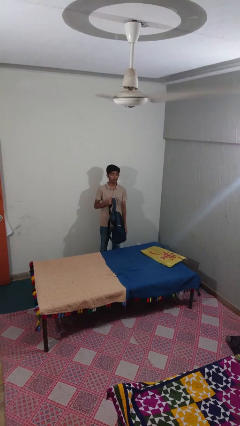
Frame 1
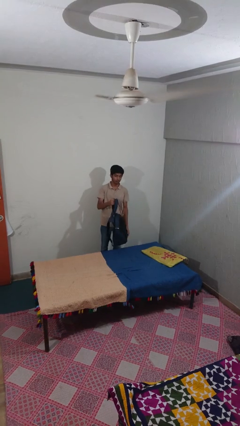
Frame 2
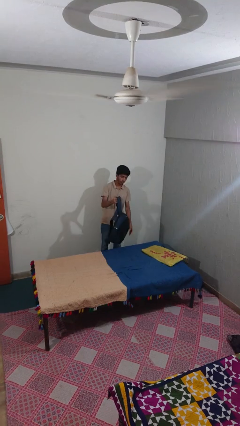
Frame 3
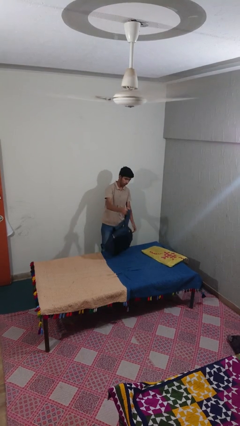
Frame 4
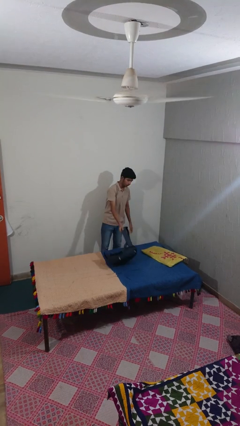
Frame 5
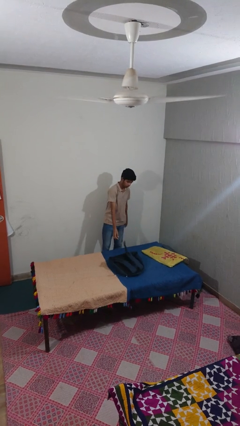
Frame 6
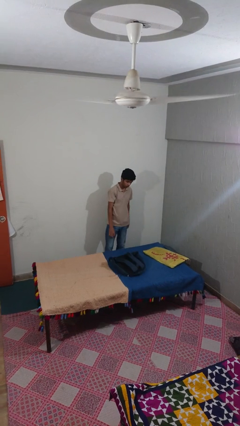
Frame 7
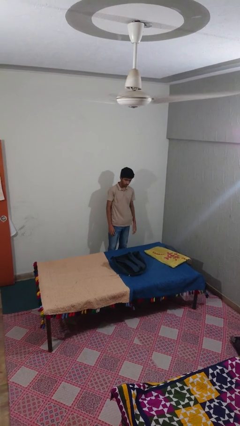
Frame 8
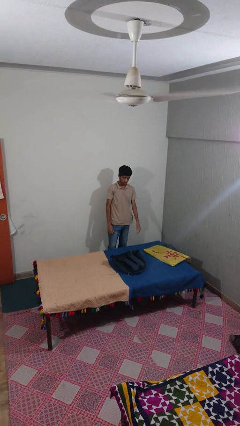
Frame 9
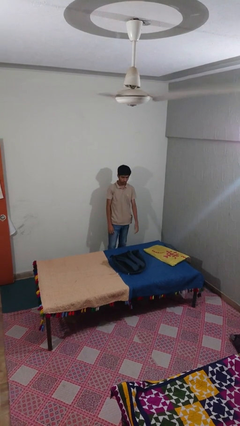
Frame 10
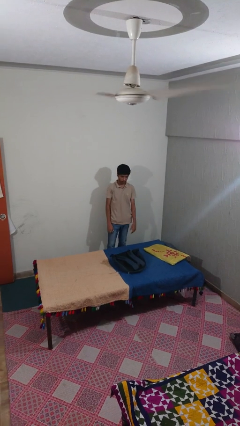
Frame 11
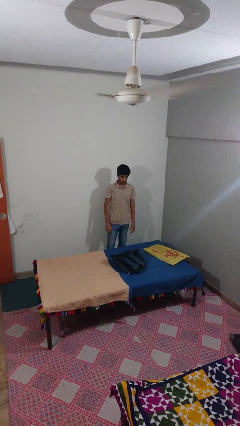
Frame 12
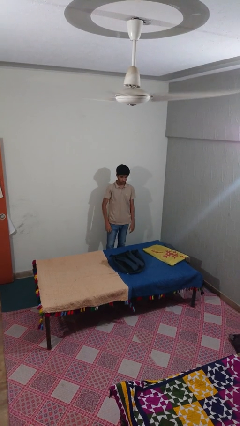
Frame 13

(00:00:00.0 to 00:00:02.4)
person puts down object on bed

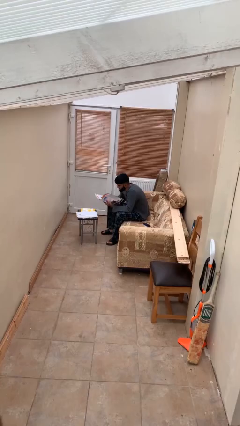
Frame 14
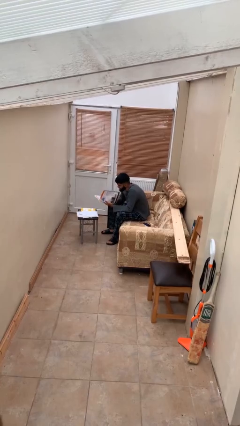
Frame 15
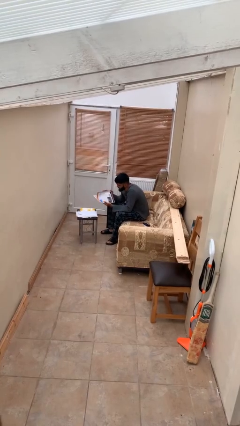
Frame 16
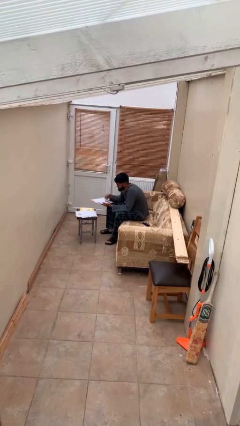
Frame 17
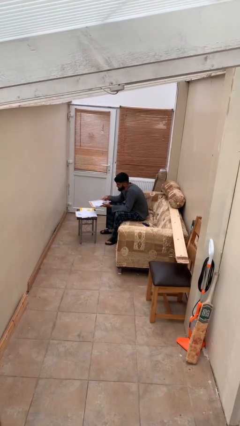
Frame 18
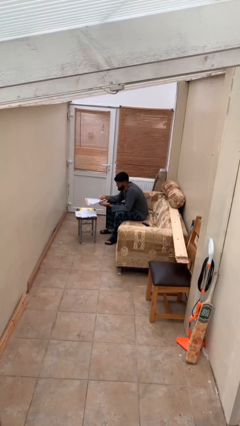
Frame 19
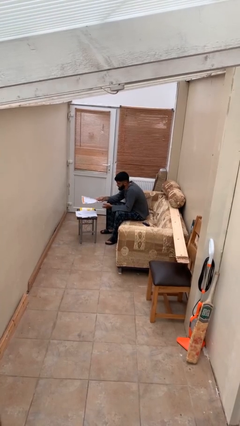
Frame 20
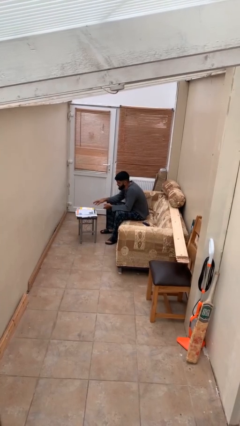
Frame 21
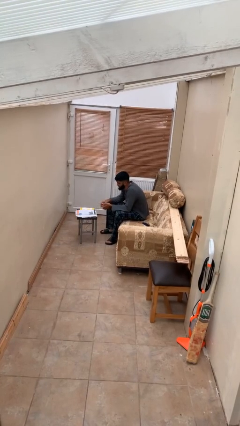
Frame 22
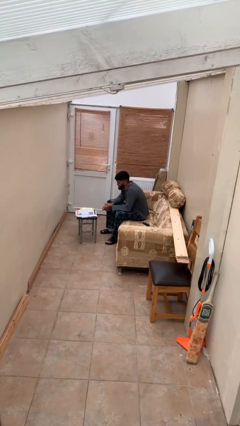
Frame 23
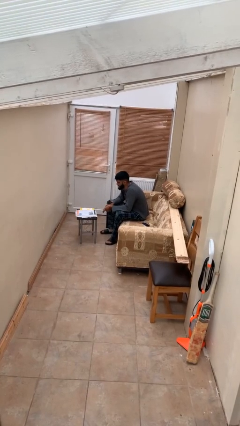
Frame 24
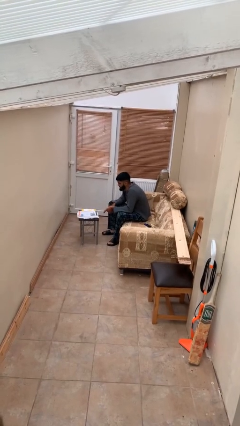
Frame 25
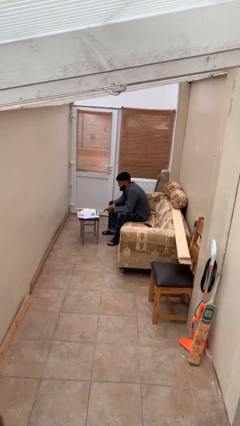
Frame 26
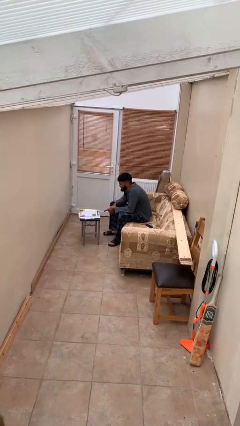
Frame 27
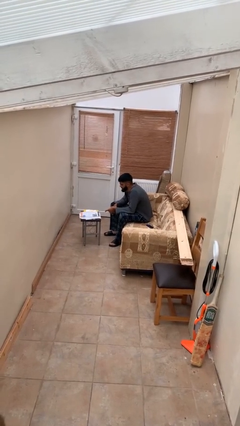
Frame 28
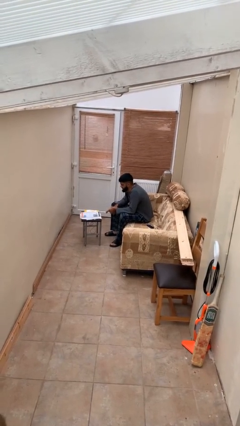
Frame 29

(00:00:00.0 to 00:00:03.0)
person puts down object on table

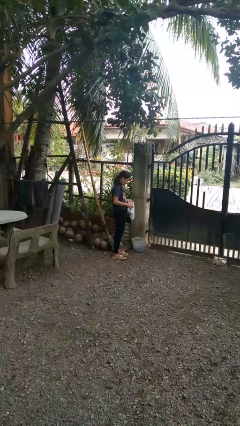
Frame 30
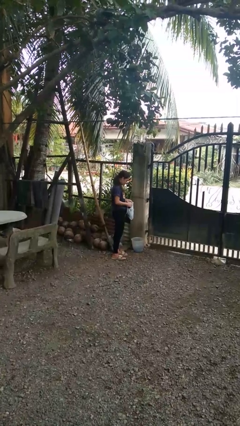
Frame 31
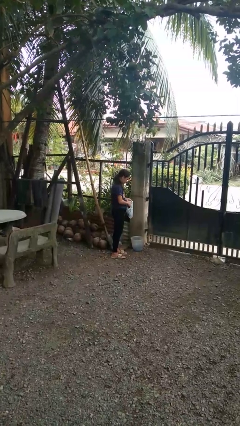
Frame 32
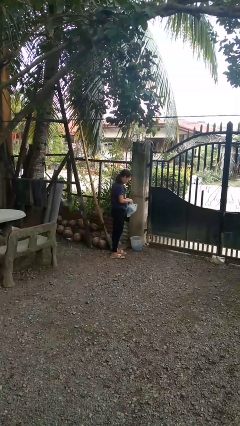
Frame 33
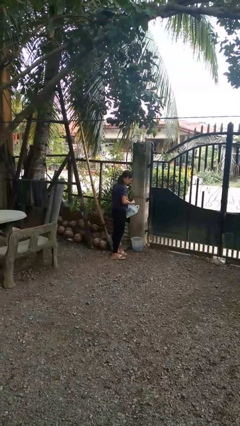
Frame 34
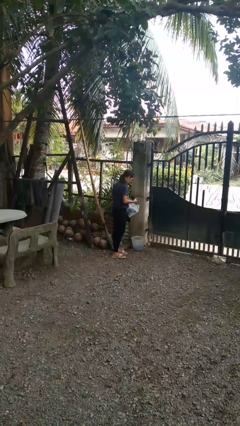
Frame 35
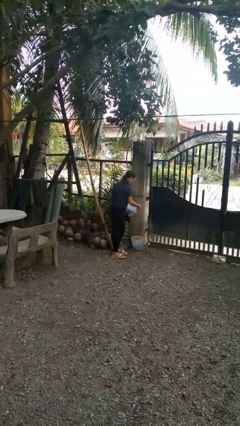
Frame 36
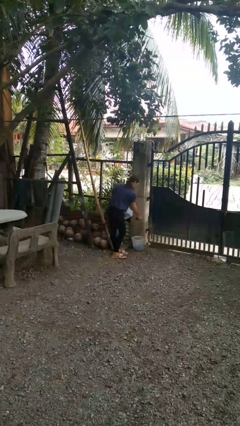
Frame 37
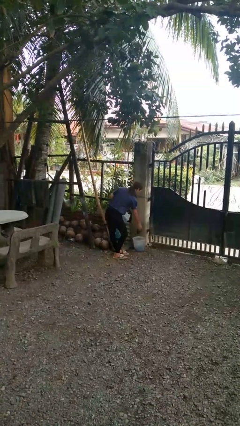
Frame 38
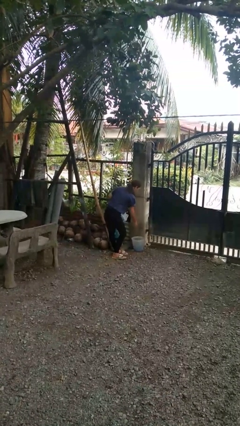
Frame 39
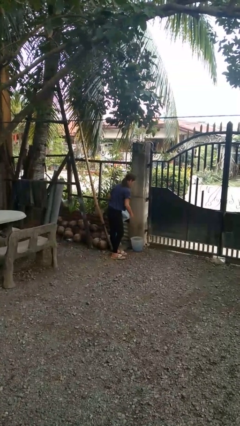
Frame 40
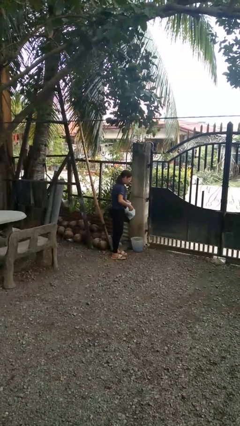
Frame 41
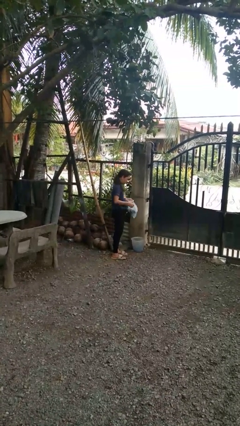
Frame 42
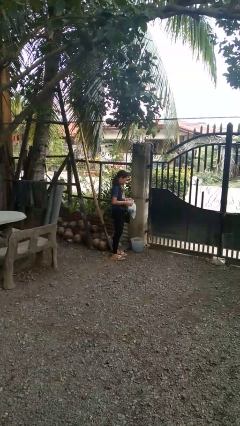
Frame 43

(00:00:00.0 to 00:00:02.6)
person discards trash

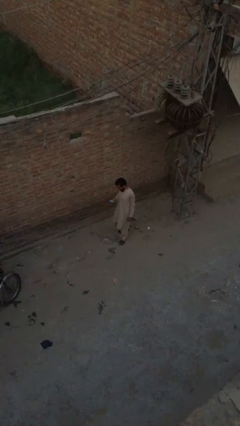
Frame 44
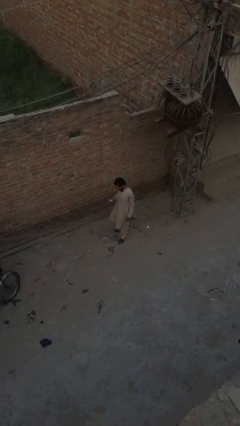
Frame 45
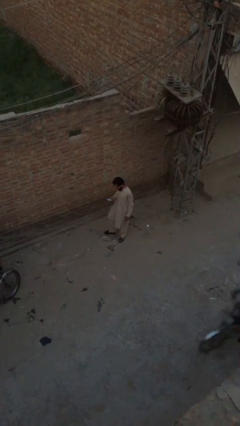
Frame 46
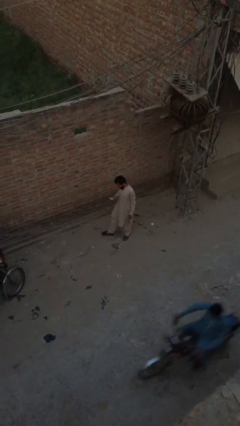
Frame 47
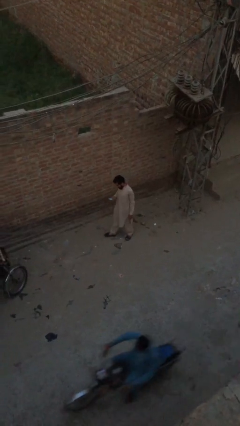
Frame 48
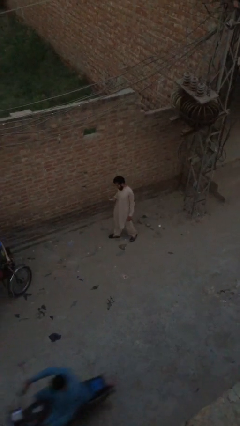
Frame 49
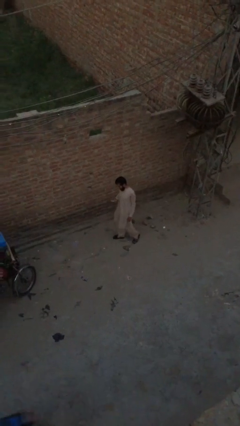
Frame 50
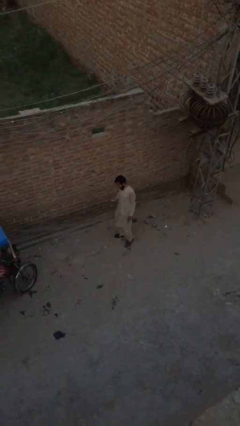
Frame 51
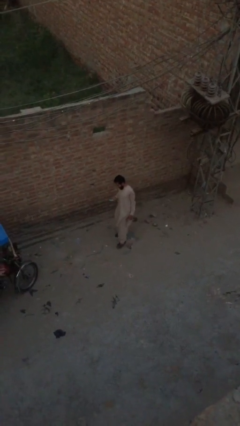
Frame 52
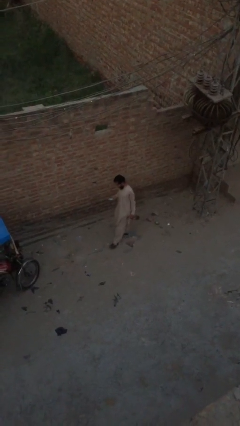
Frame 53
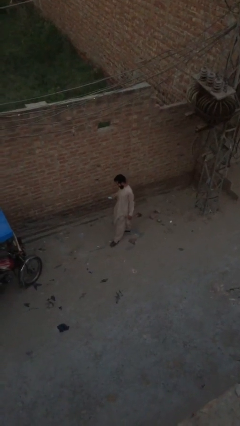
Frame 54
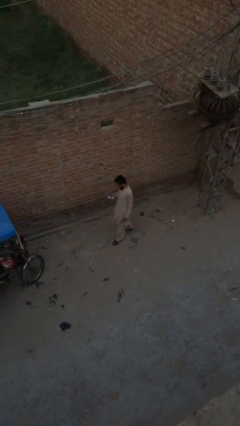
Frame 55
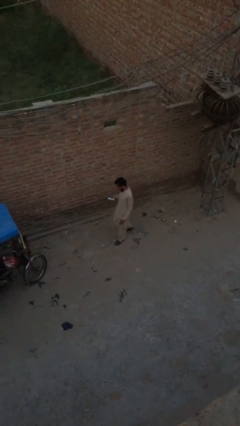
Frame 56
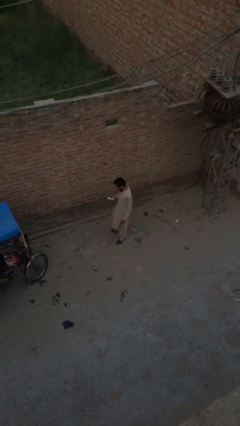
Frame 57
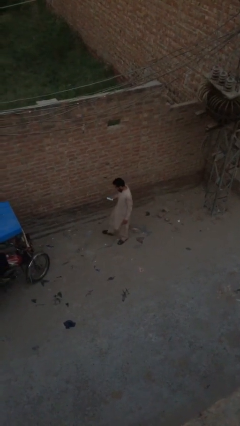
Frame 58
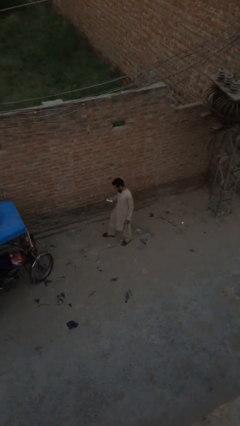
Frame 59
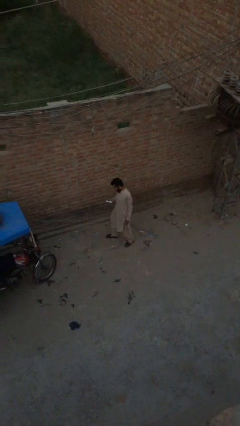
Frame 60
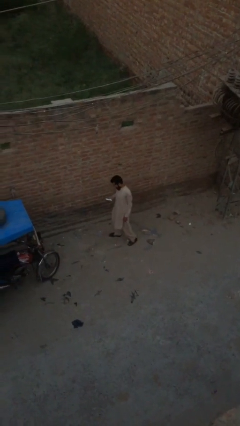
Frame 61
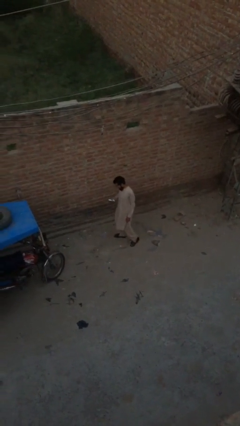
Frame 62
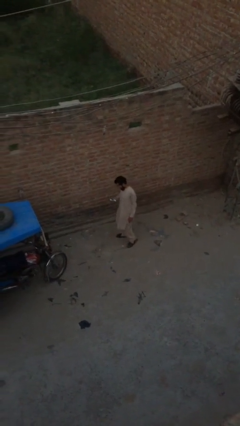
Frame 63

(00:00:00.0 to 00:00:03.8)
person texts on phone

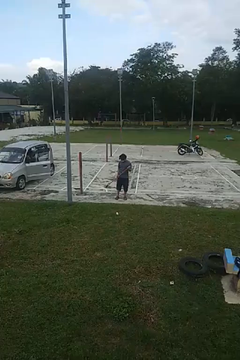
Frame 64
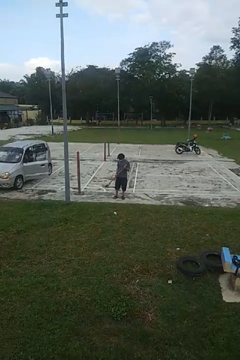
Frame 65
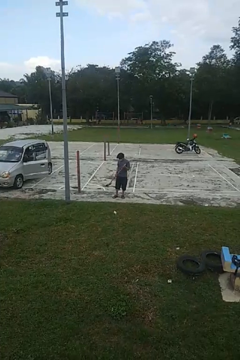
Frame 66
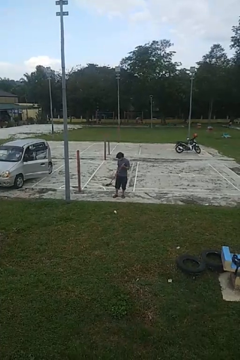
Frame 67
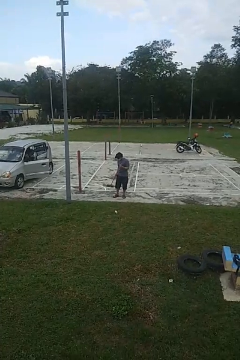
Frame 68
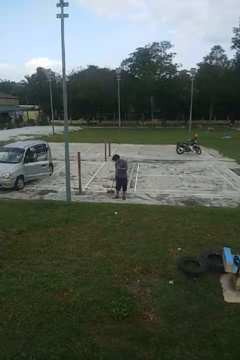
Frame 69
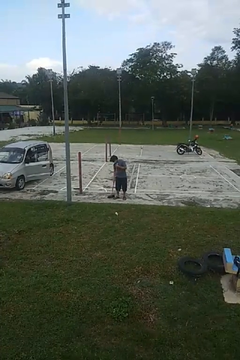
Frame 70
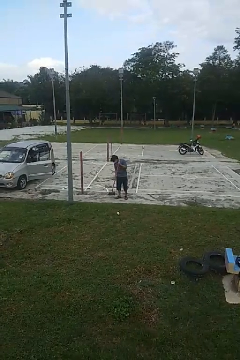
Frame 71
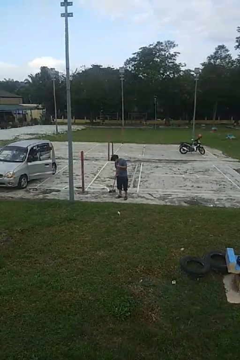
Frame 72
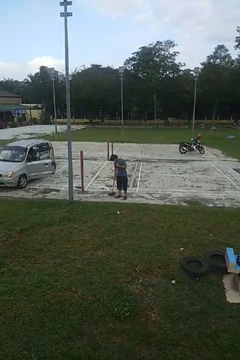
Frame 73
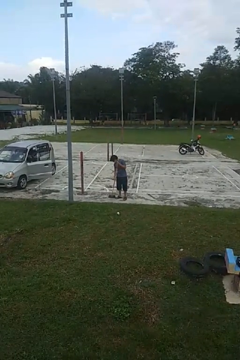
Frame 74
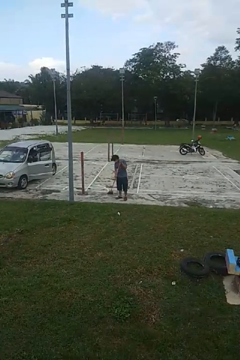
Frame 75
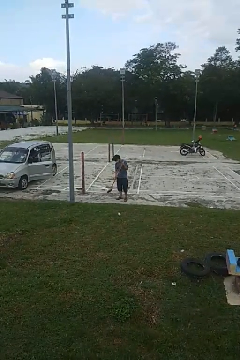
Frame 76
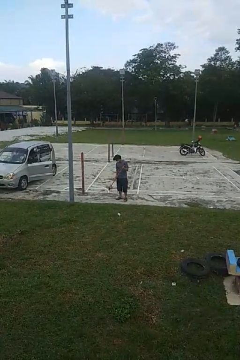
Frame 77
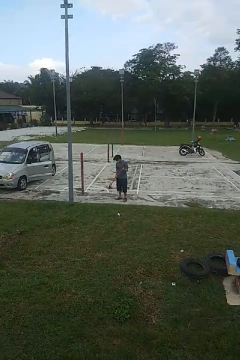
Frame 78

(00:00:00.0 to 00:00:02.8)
person sweeps floor

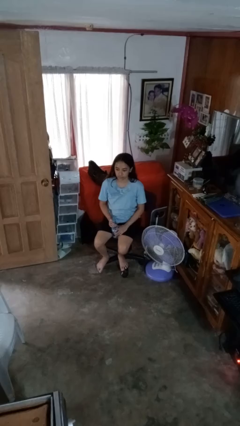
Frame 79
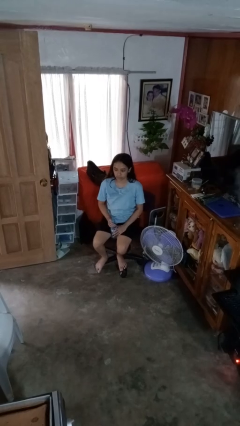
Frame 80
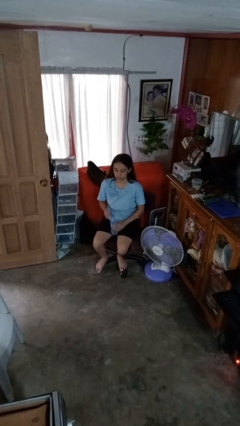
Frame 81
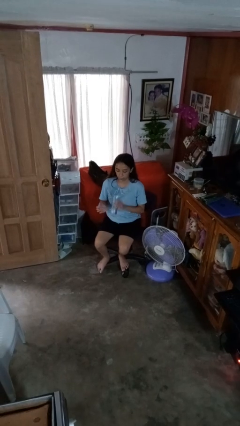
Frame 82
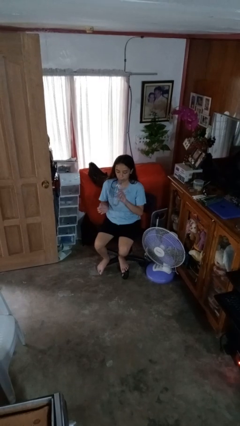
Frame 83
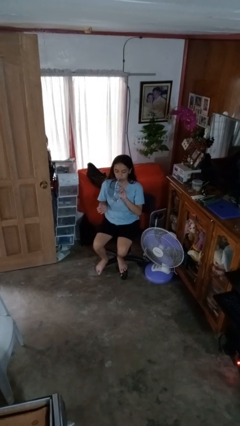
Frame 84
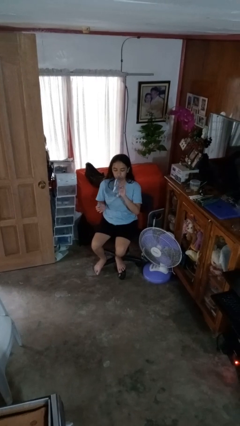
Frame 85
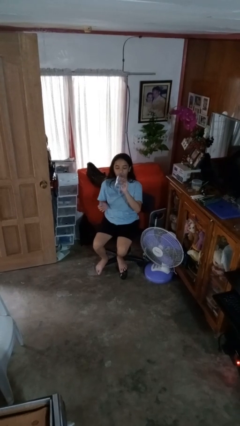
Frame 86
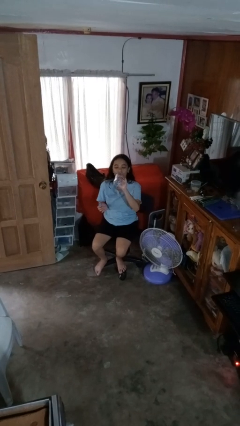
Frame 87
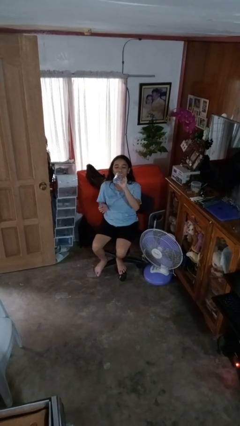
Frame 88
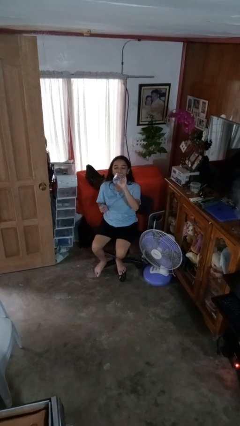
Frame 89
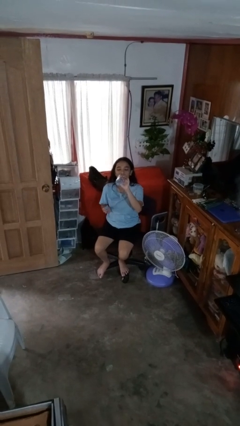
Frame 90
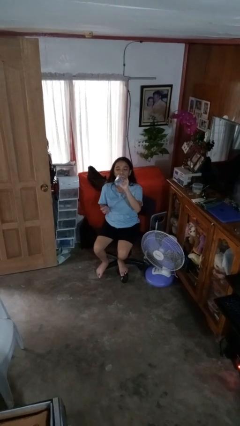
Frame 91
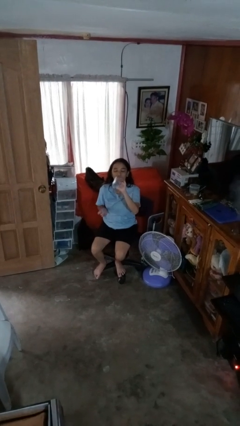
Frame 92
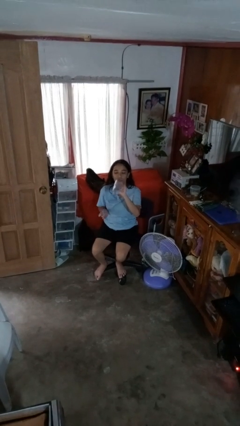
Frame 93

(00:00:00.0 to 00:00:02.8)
person drinks from bottle

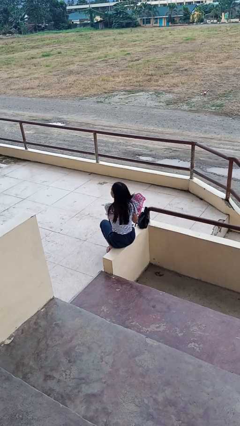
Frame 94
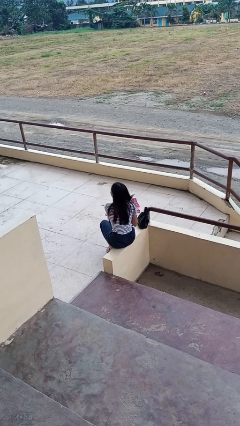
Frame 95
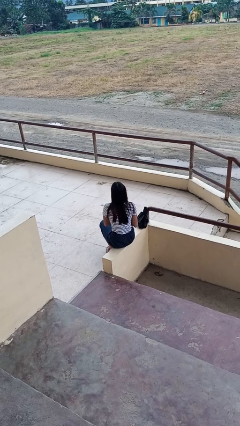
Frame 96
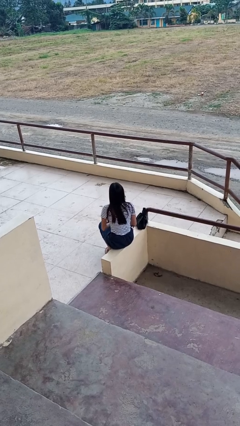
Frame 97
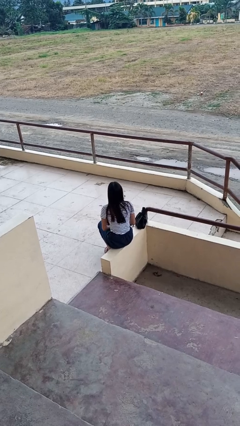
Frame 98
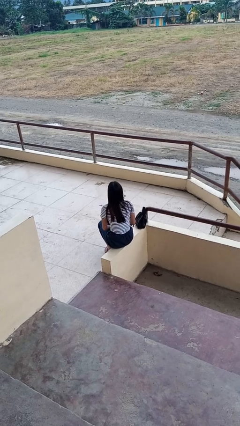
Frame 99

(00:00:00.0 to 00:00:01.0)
person dries hair with towel
